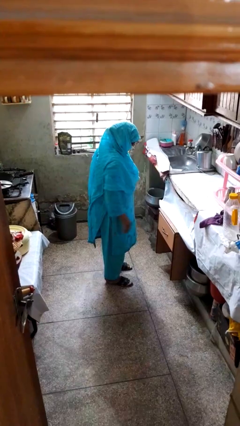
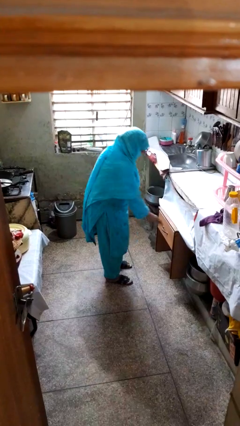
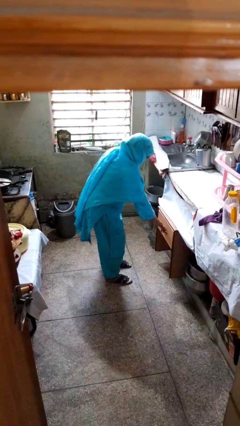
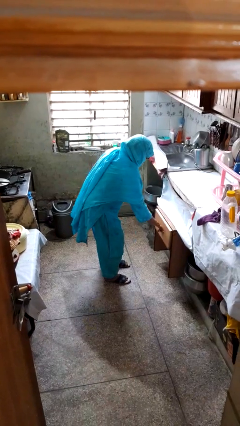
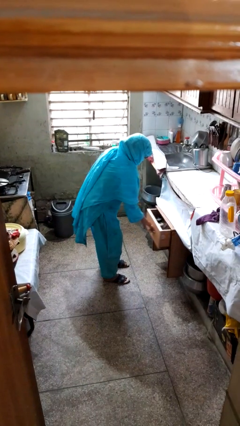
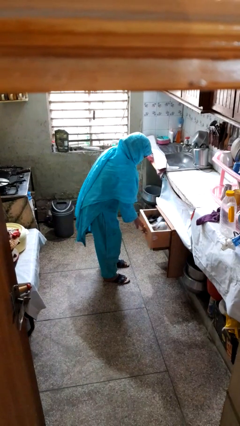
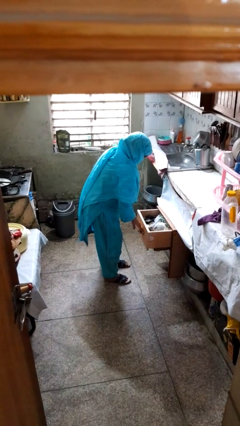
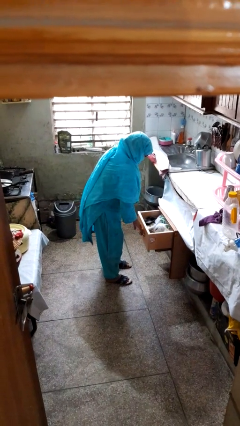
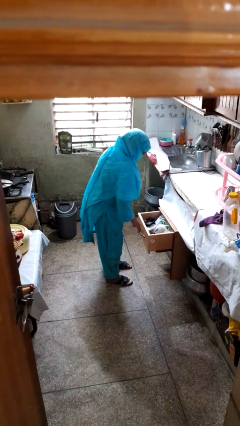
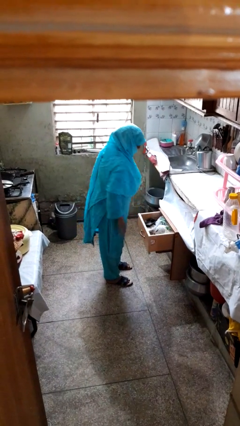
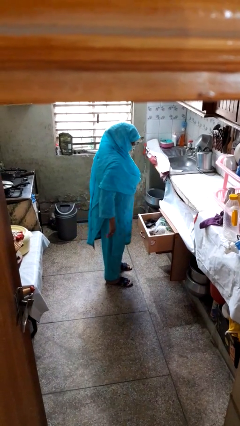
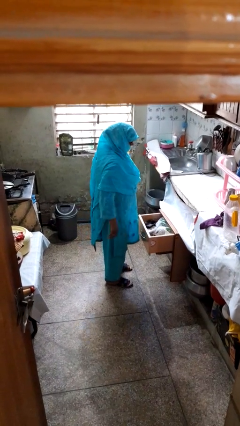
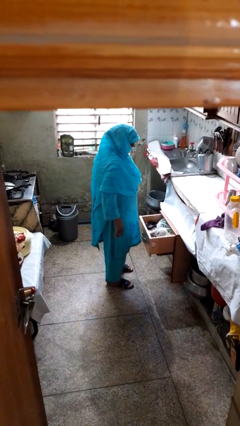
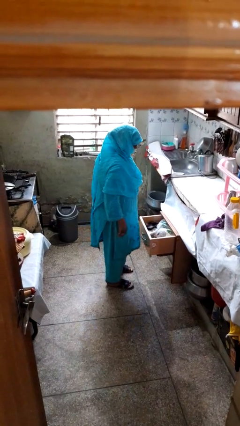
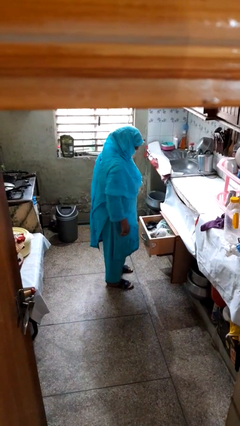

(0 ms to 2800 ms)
person opens kitchen drawer

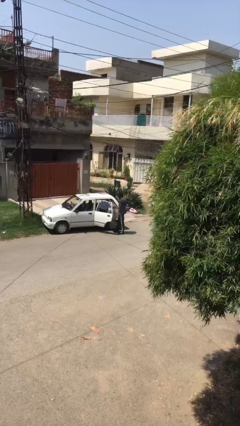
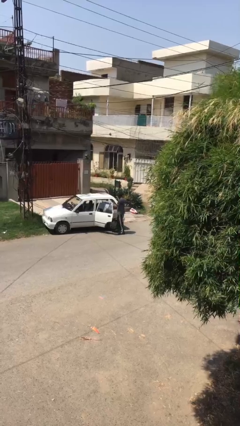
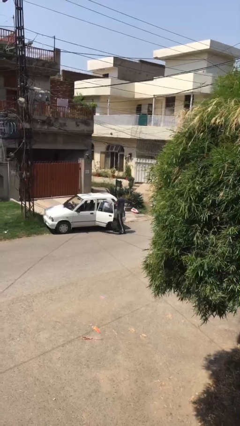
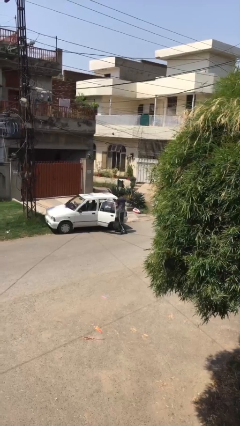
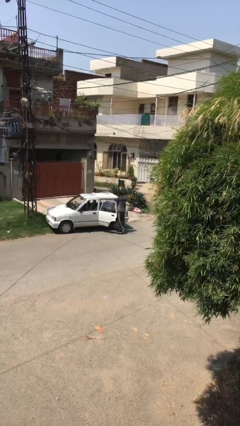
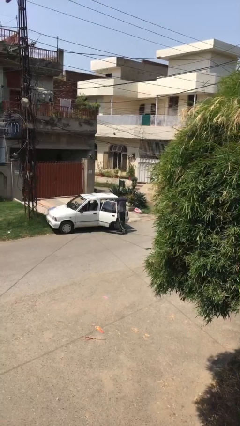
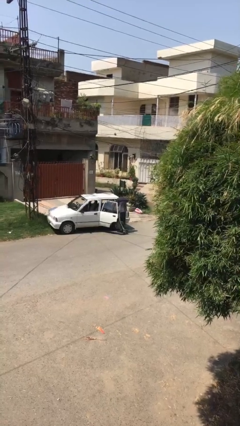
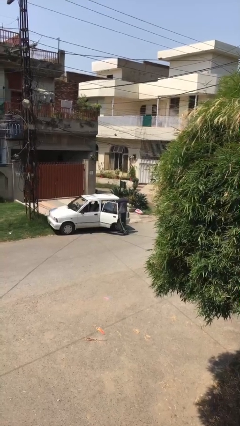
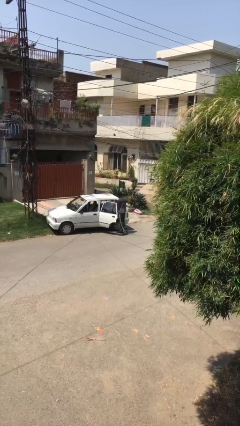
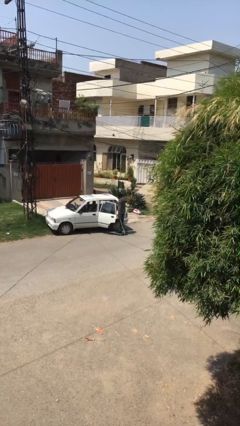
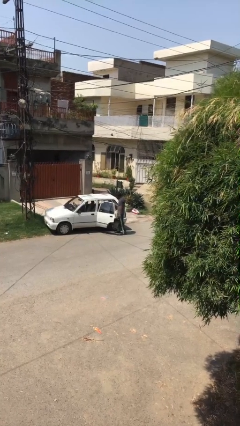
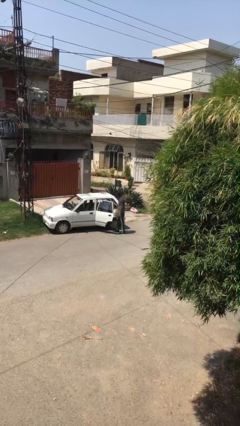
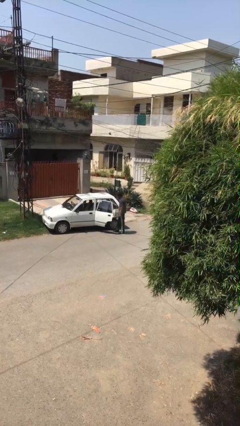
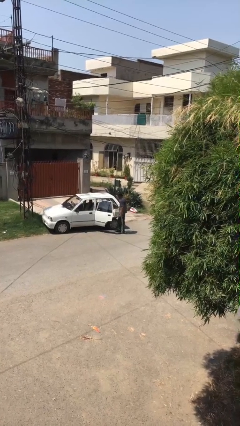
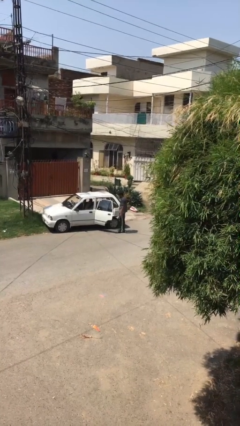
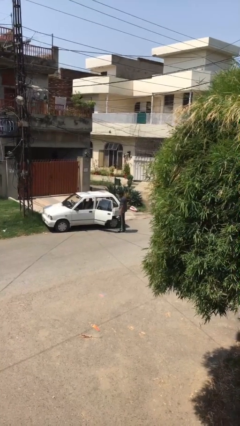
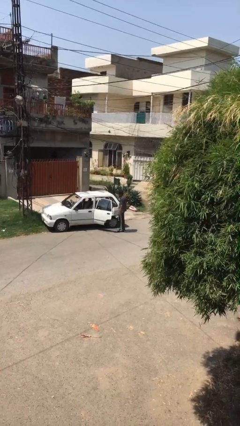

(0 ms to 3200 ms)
person loads car

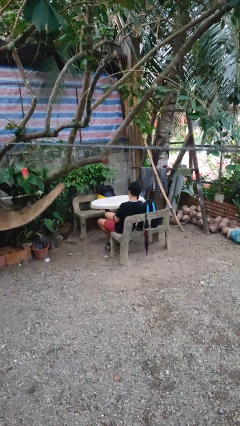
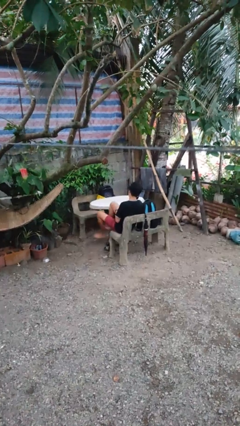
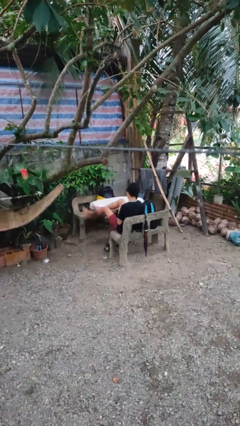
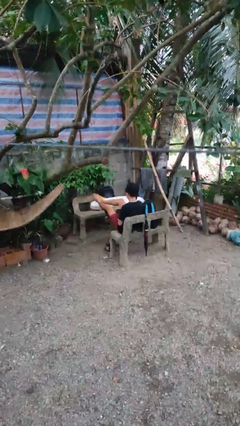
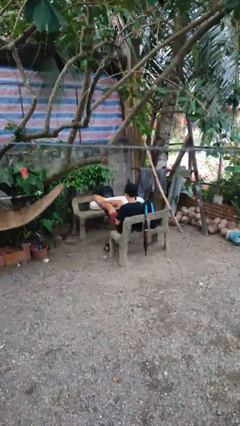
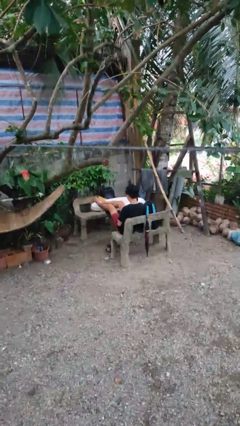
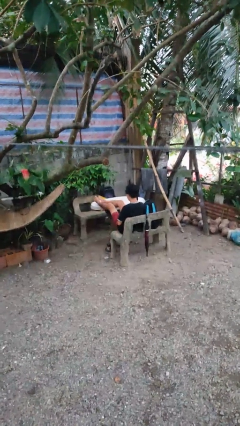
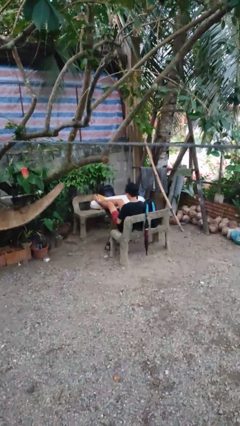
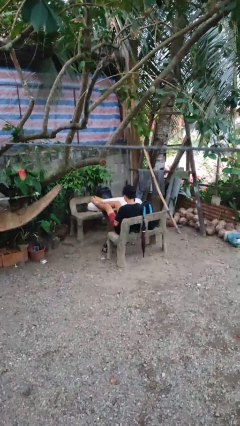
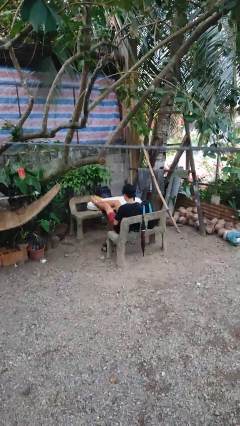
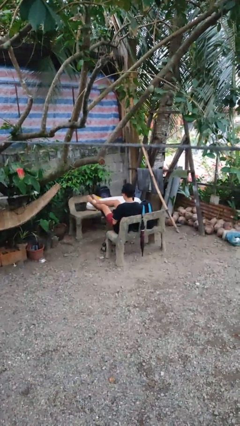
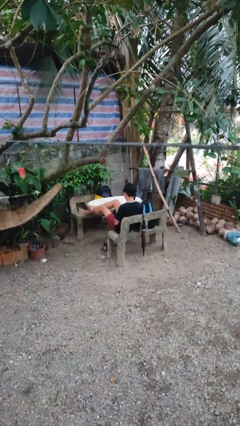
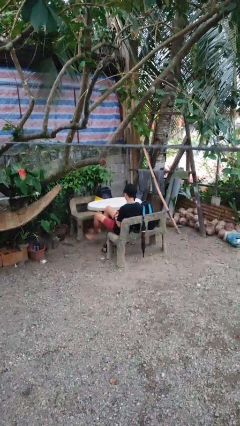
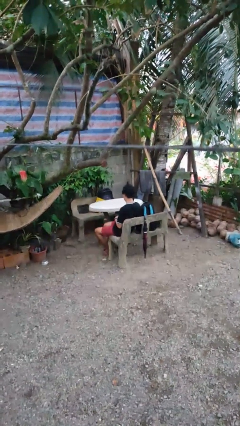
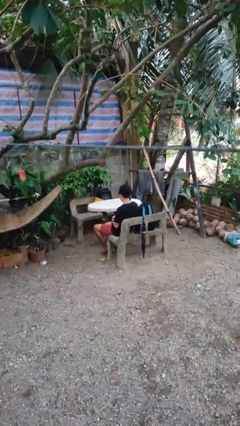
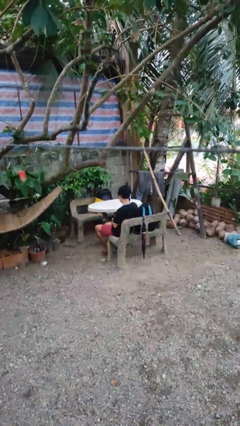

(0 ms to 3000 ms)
person puts feet up

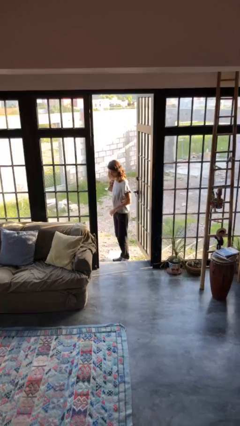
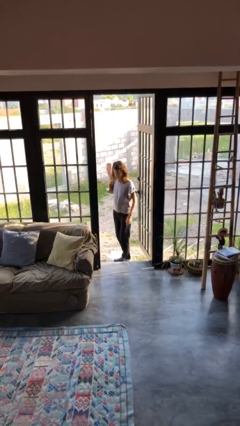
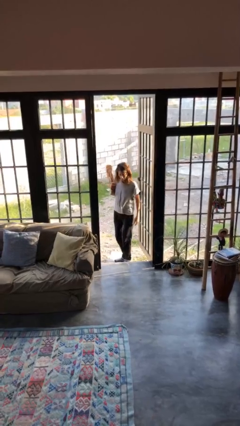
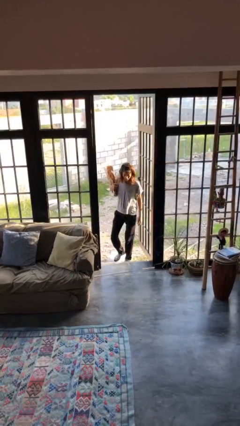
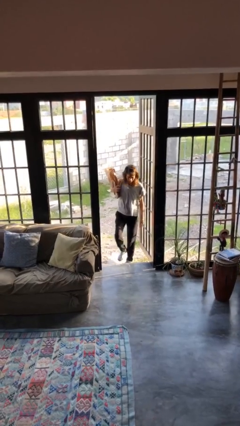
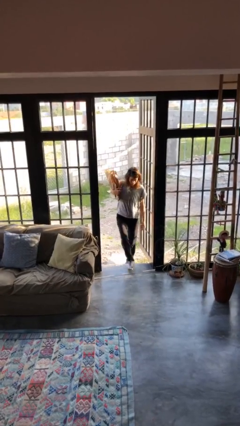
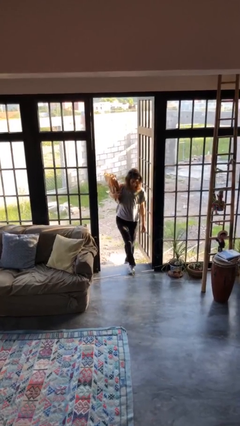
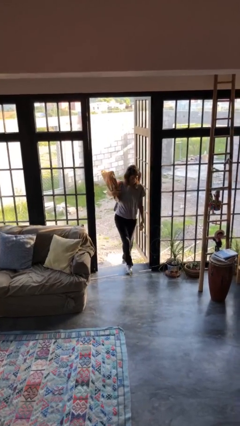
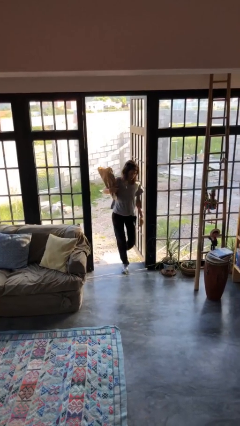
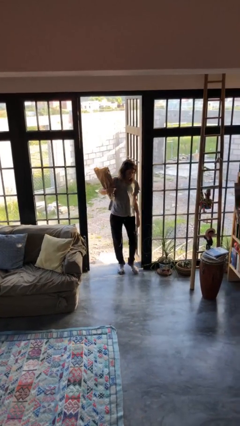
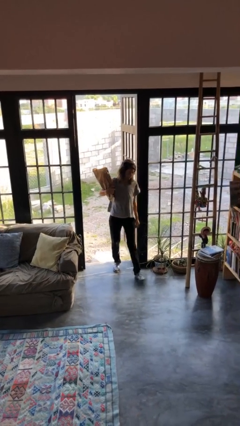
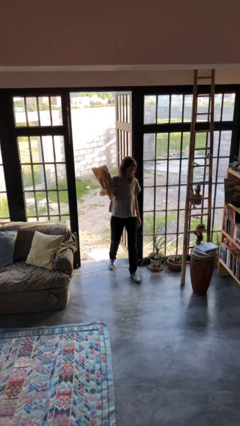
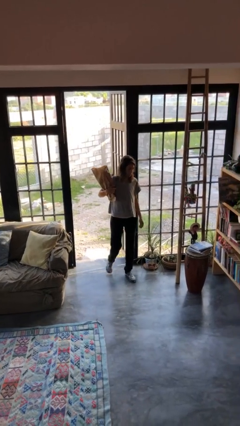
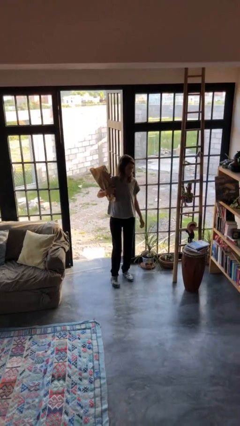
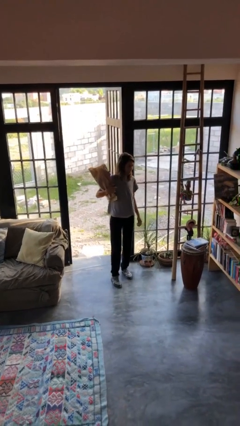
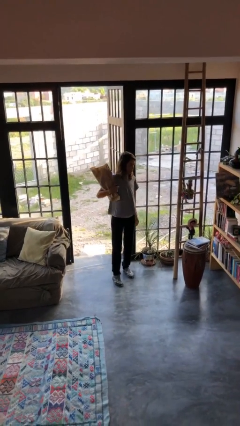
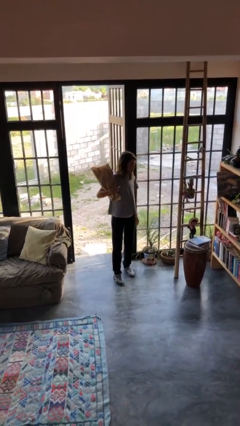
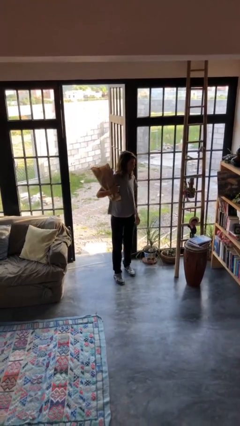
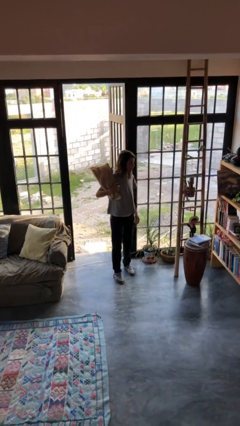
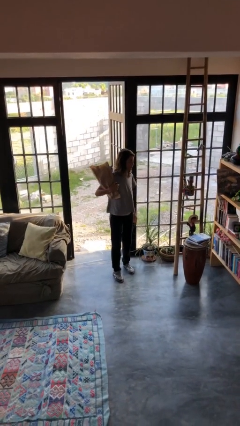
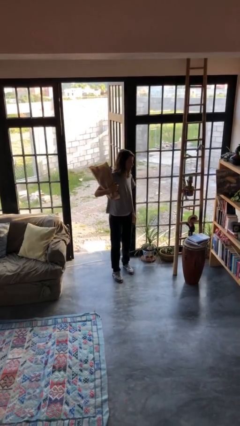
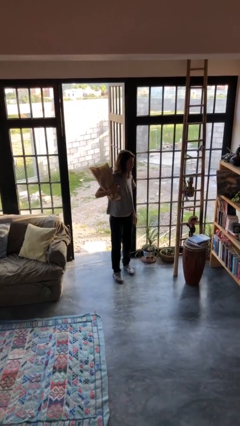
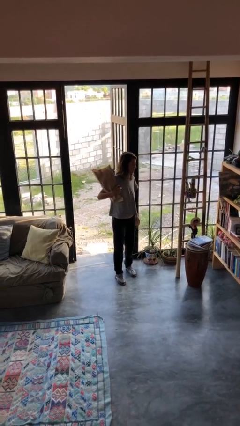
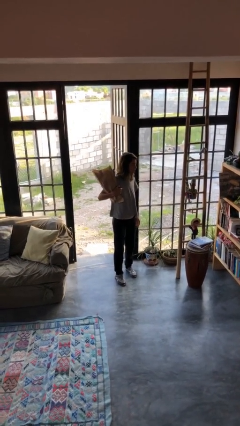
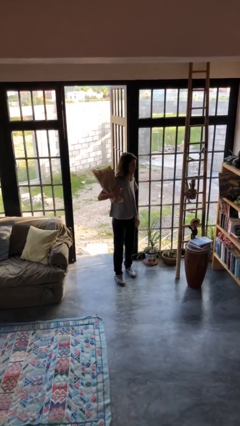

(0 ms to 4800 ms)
person carries groceries

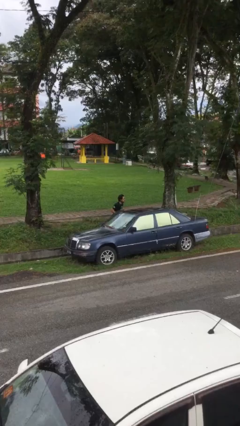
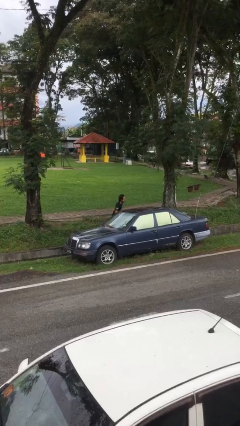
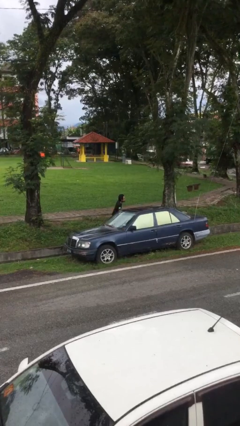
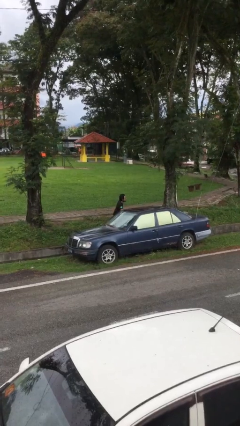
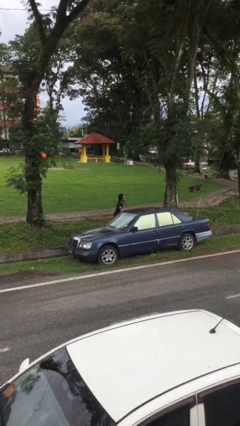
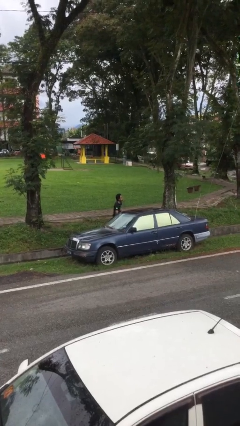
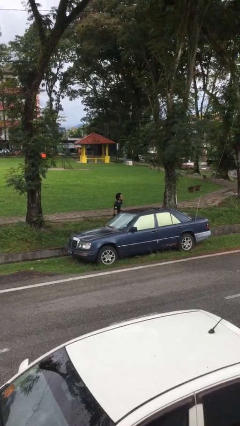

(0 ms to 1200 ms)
person closes car door

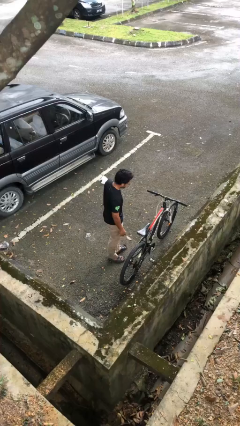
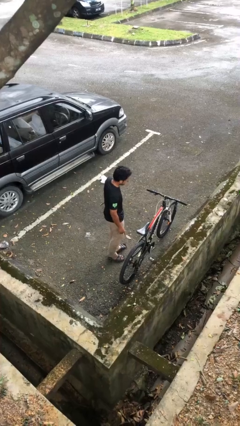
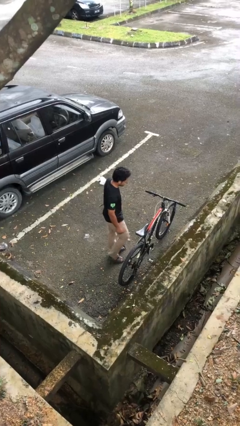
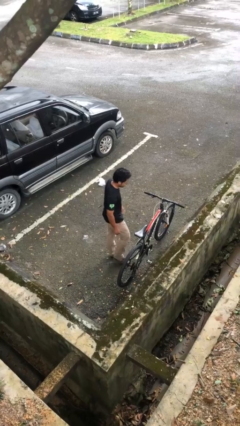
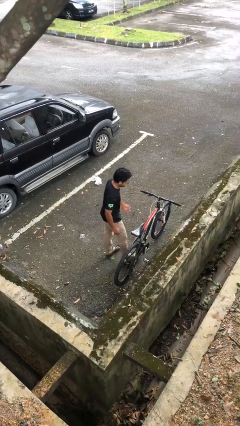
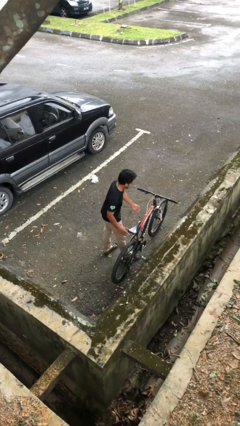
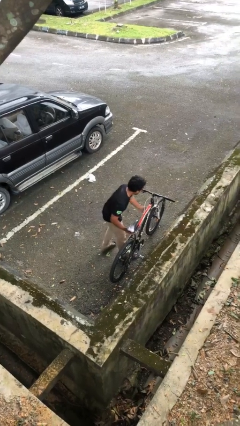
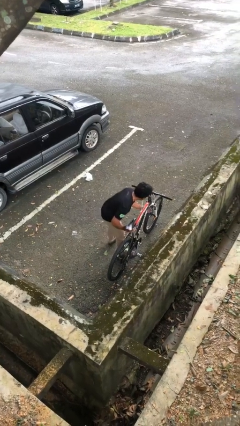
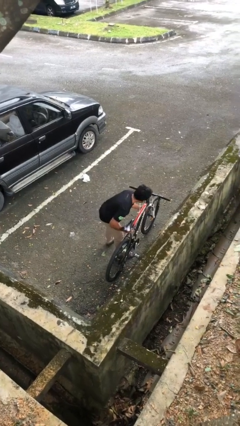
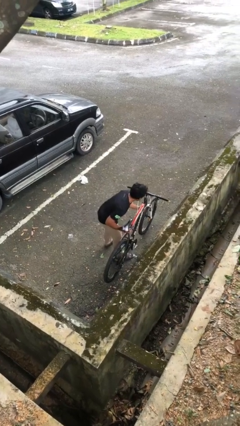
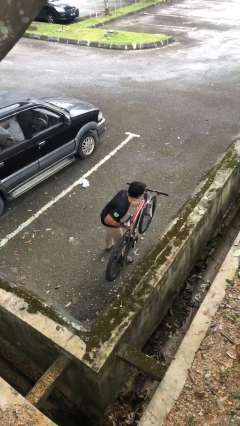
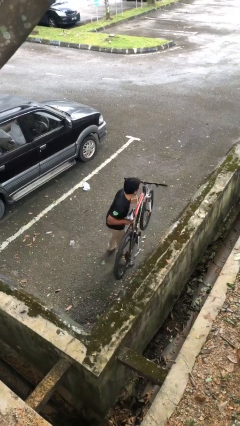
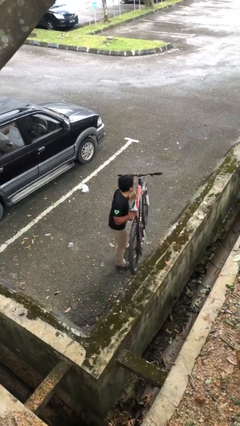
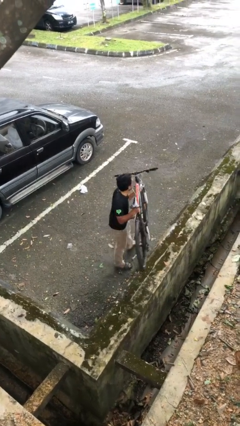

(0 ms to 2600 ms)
person picks up object from floor
